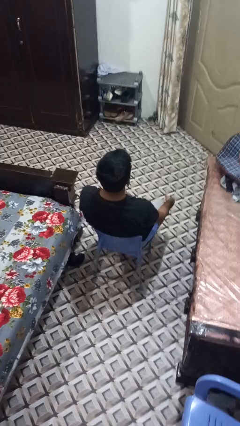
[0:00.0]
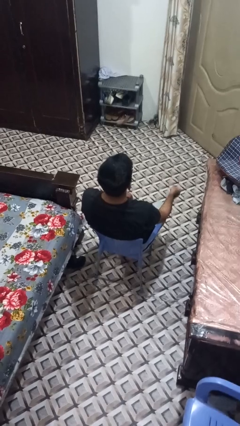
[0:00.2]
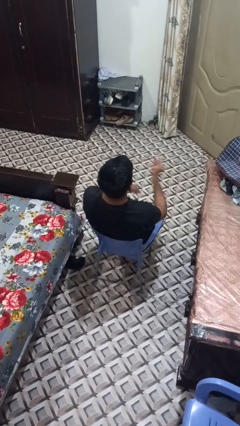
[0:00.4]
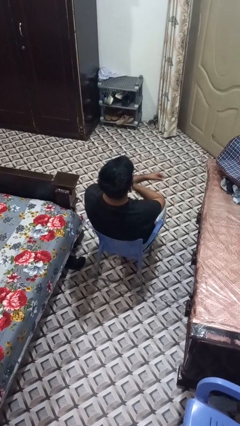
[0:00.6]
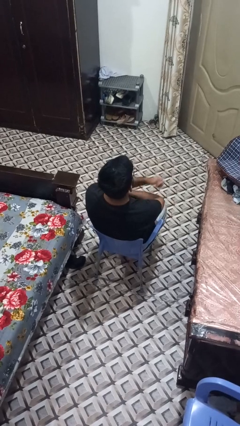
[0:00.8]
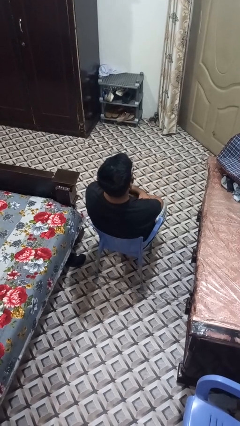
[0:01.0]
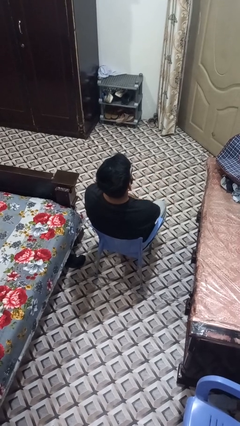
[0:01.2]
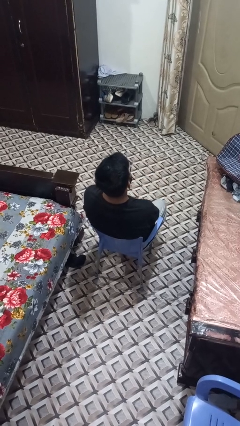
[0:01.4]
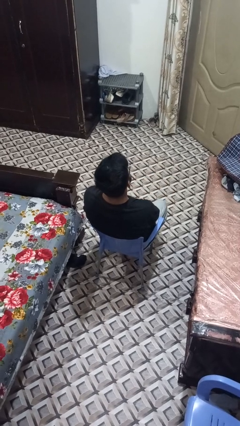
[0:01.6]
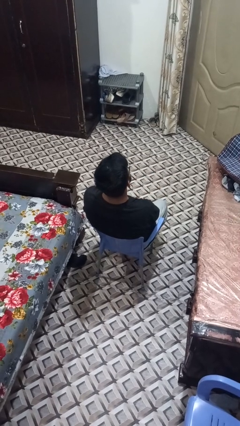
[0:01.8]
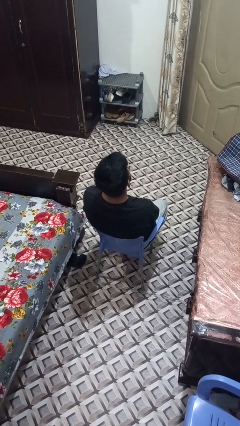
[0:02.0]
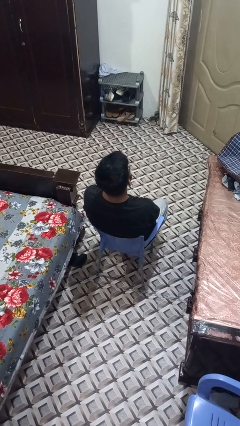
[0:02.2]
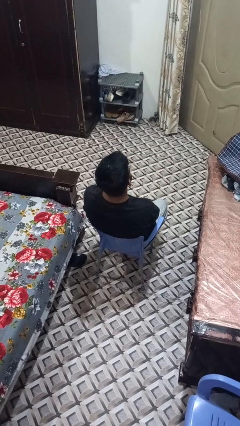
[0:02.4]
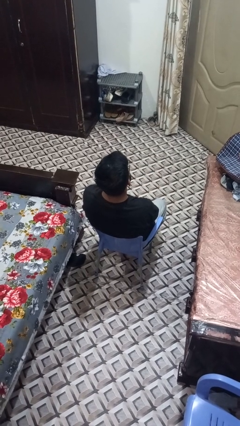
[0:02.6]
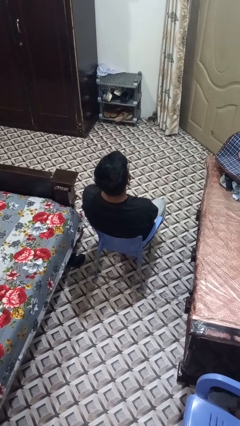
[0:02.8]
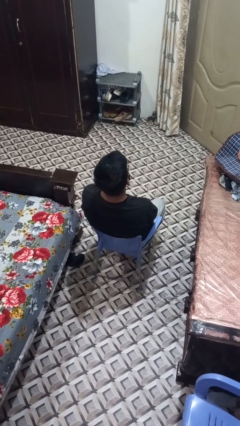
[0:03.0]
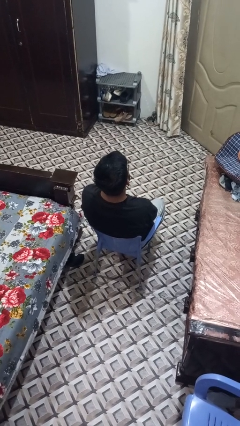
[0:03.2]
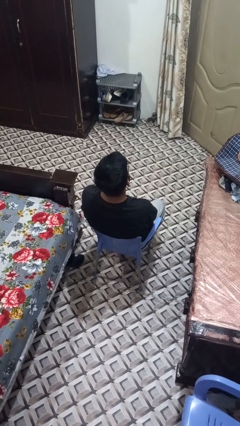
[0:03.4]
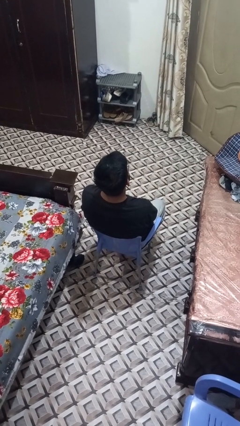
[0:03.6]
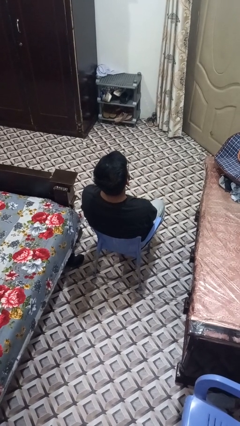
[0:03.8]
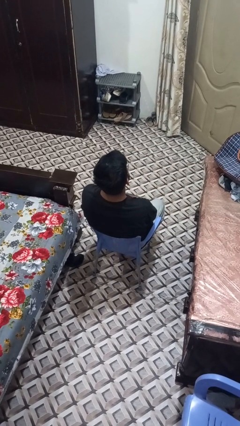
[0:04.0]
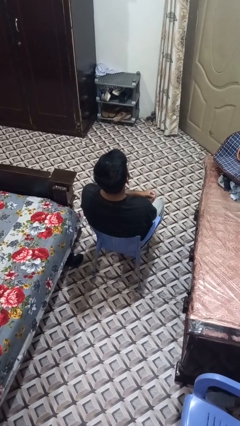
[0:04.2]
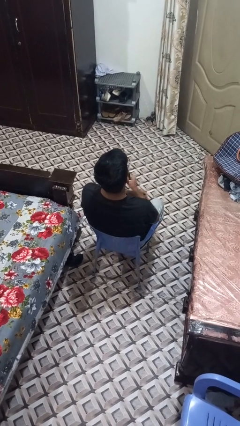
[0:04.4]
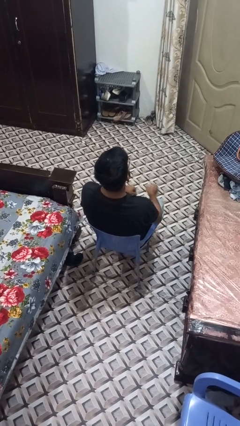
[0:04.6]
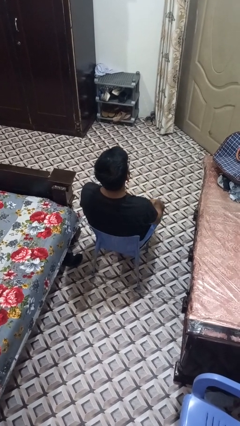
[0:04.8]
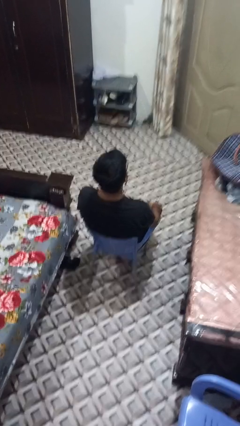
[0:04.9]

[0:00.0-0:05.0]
person crosses arms

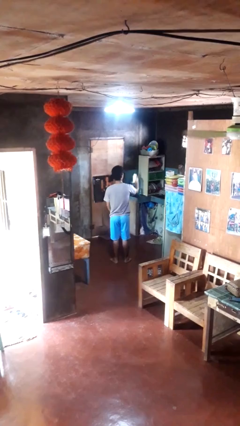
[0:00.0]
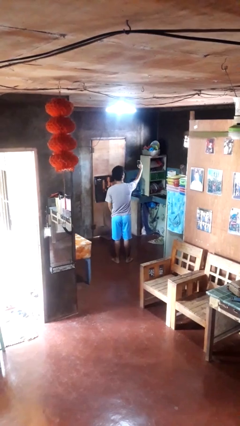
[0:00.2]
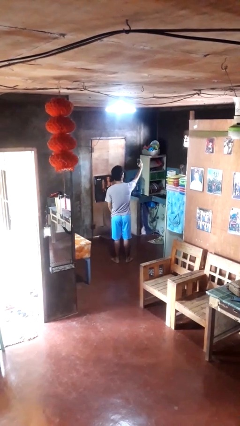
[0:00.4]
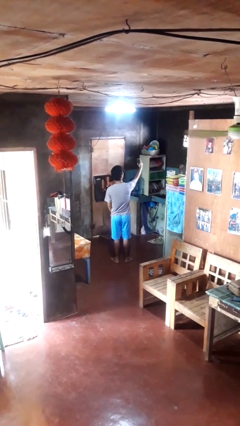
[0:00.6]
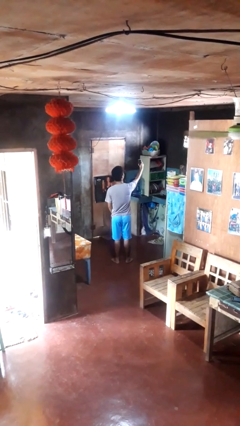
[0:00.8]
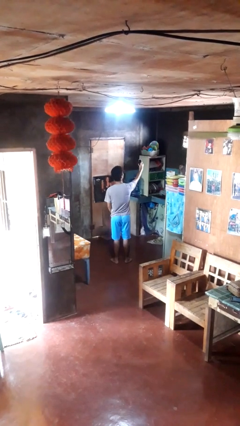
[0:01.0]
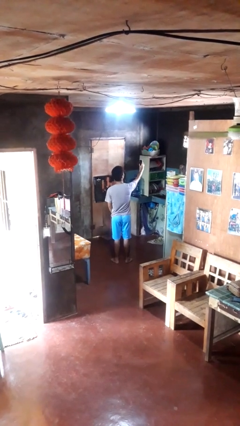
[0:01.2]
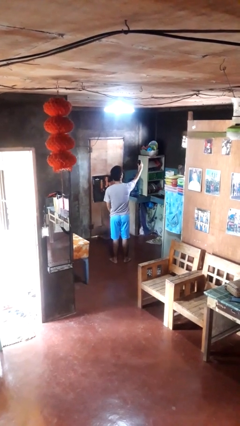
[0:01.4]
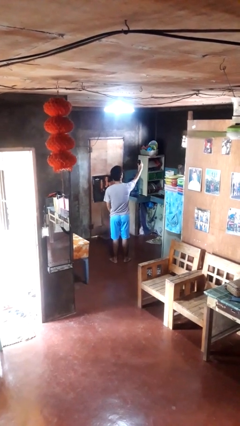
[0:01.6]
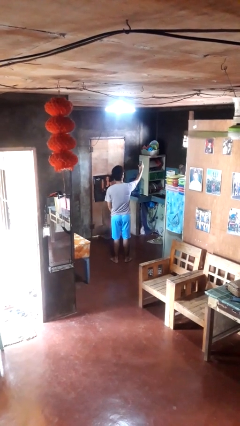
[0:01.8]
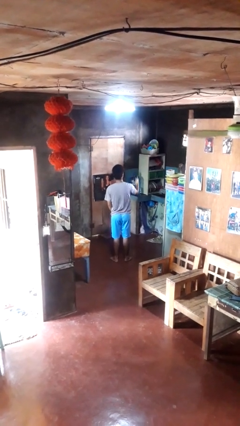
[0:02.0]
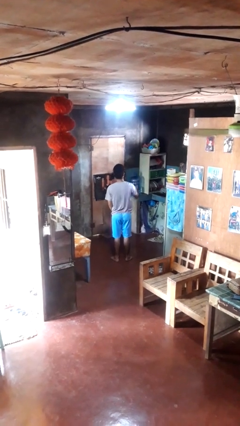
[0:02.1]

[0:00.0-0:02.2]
person takes selfie

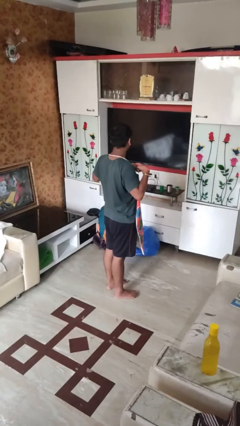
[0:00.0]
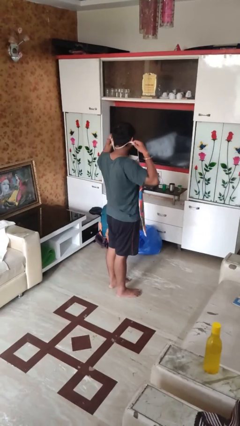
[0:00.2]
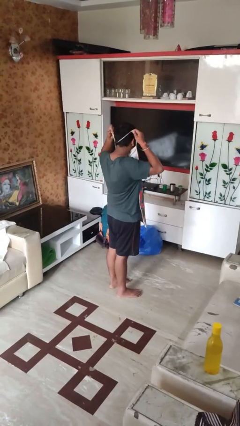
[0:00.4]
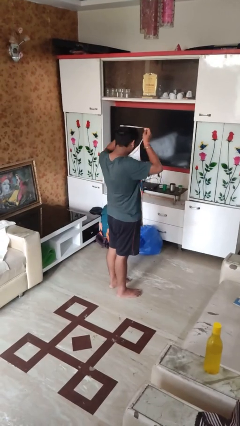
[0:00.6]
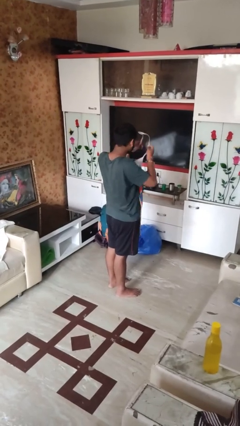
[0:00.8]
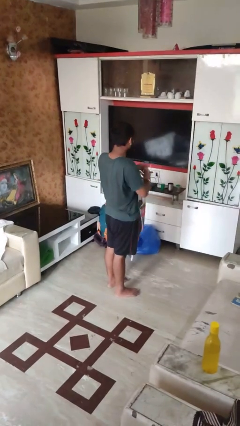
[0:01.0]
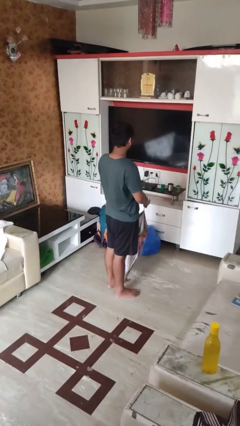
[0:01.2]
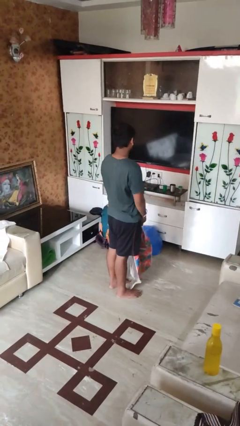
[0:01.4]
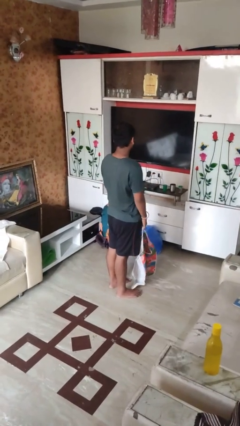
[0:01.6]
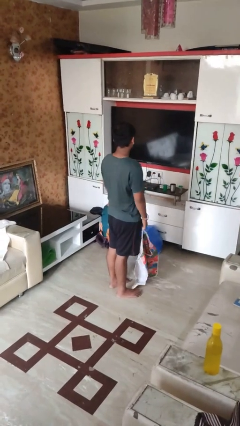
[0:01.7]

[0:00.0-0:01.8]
person takes off apron

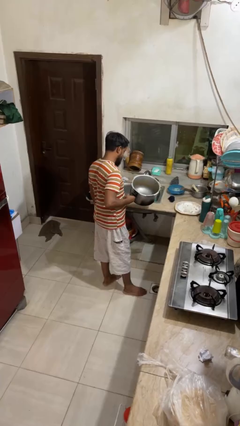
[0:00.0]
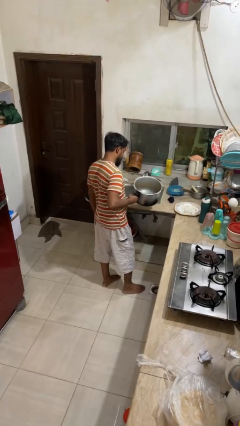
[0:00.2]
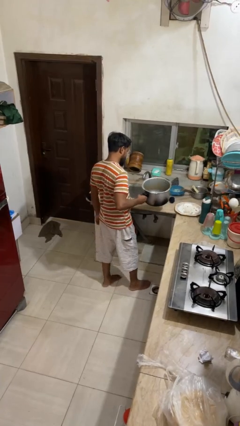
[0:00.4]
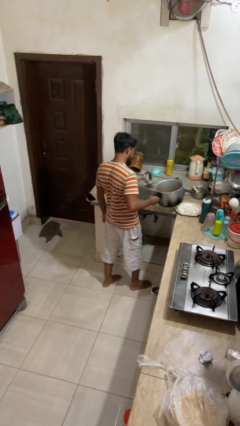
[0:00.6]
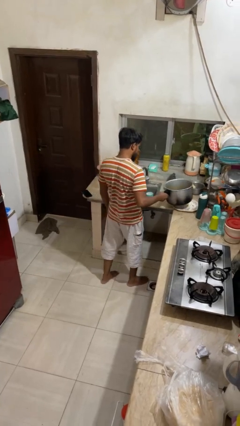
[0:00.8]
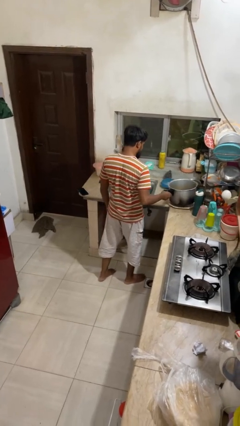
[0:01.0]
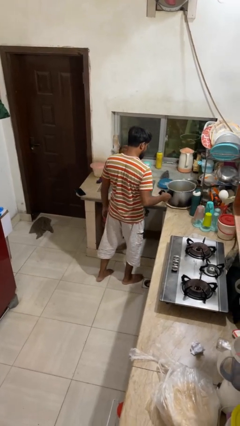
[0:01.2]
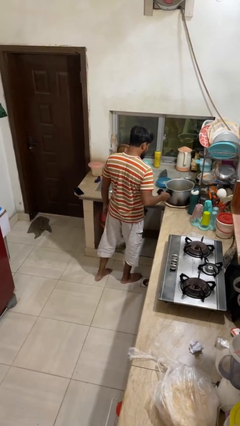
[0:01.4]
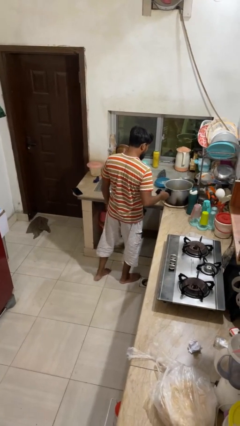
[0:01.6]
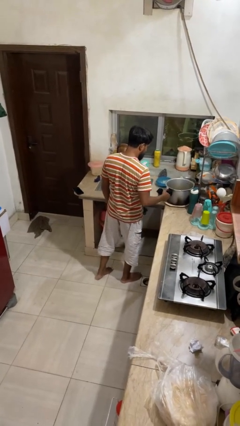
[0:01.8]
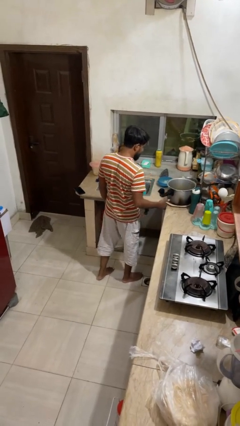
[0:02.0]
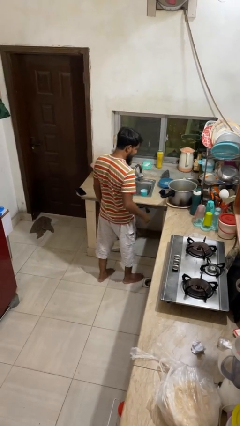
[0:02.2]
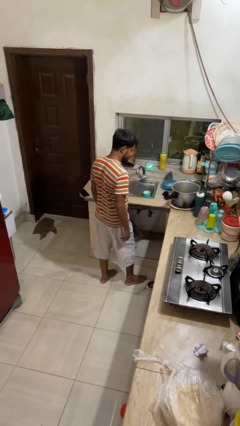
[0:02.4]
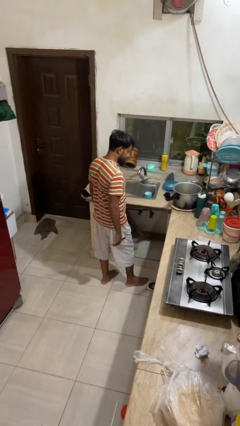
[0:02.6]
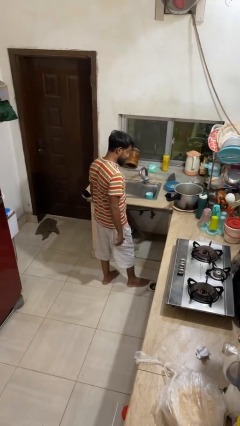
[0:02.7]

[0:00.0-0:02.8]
person puts down object on countertop

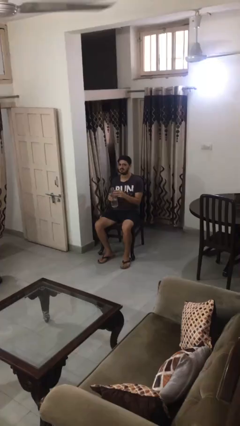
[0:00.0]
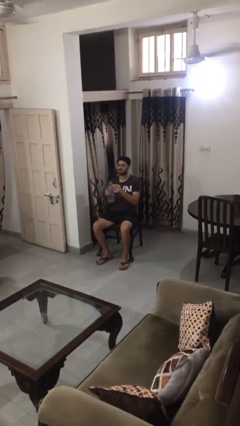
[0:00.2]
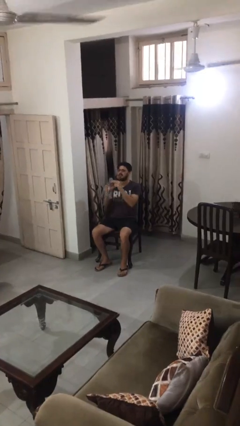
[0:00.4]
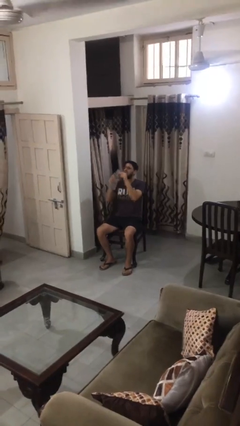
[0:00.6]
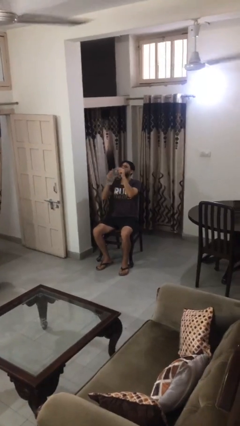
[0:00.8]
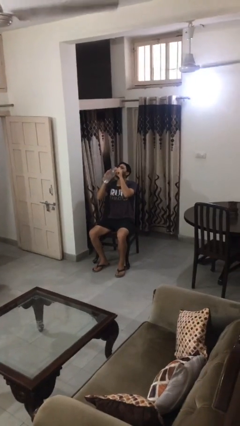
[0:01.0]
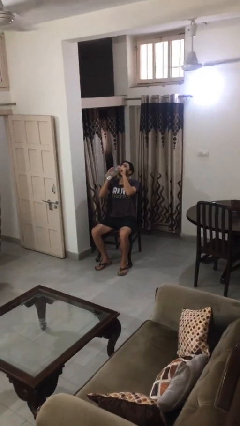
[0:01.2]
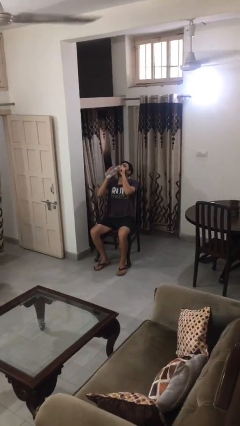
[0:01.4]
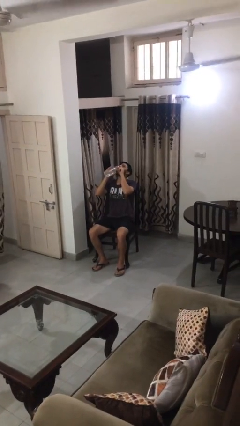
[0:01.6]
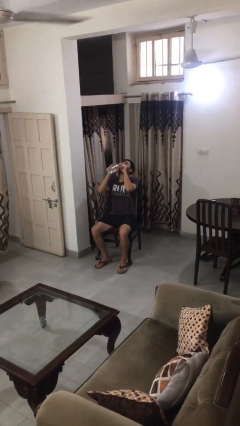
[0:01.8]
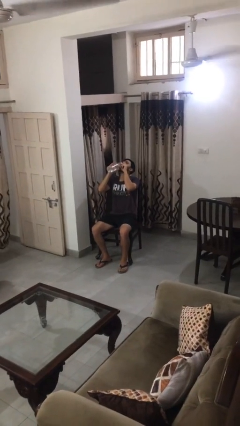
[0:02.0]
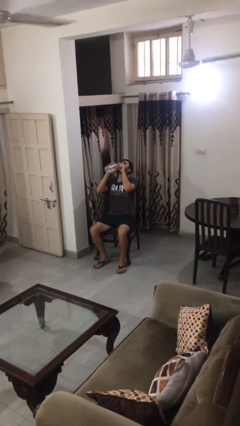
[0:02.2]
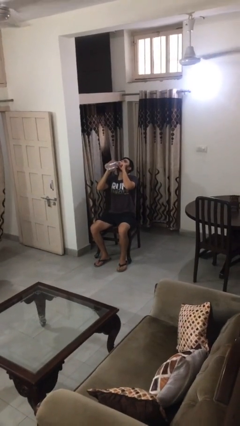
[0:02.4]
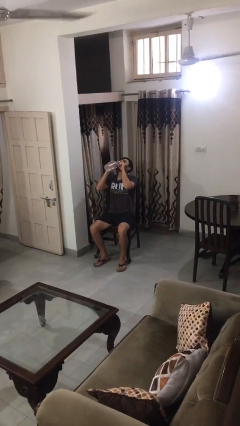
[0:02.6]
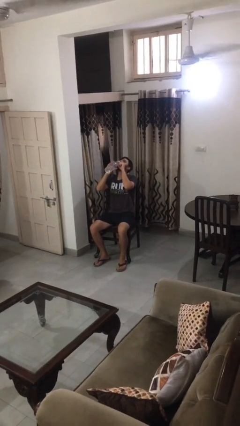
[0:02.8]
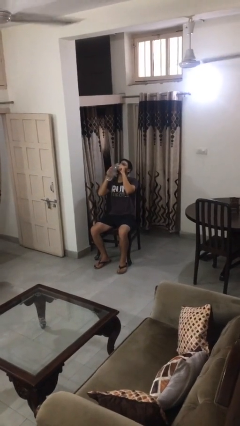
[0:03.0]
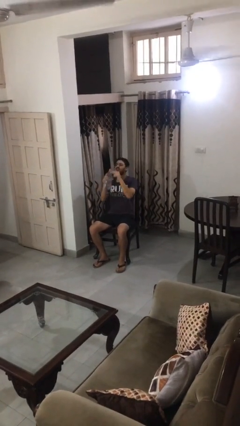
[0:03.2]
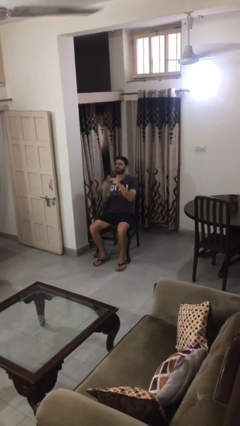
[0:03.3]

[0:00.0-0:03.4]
person drinks from bottle

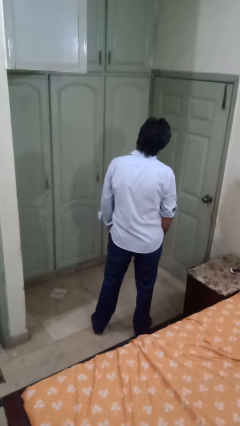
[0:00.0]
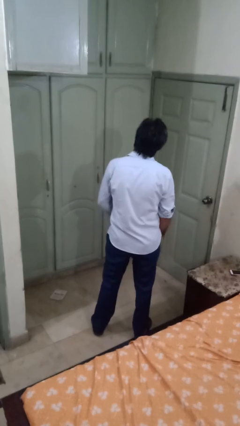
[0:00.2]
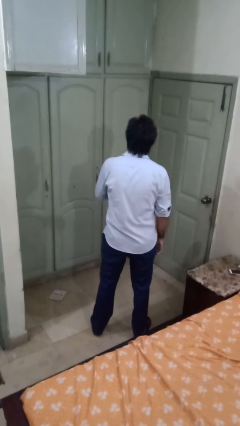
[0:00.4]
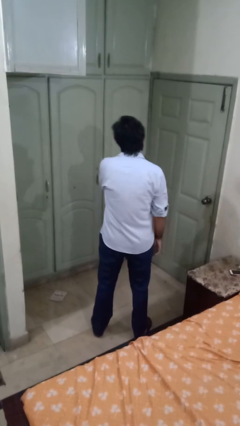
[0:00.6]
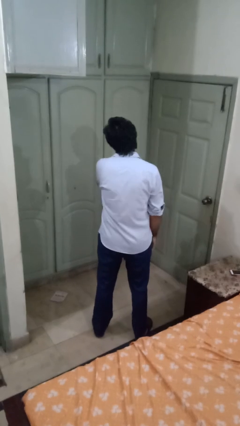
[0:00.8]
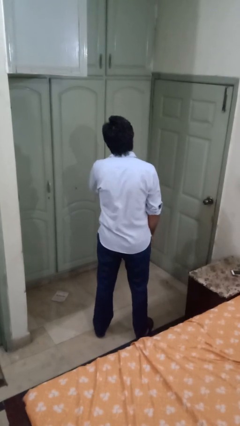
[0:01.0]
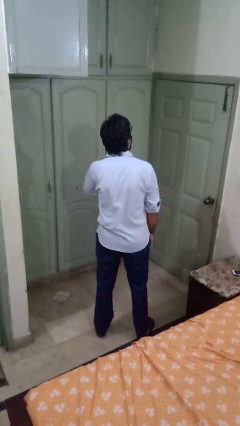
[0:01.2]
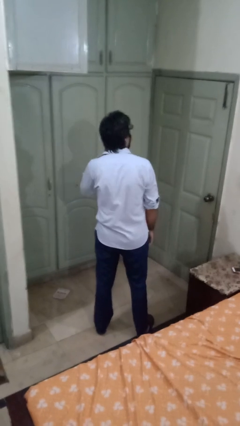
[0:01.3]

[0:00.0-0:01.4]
person gestures cut

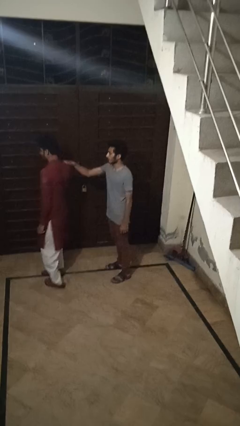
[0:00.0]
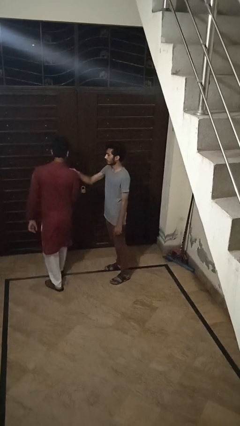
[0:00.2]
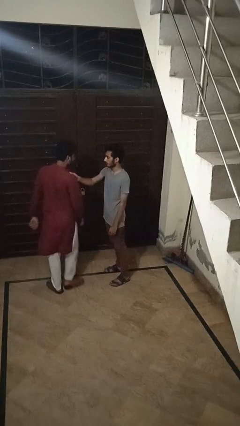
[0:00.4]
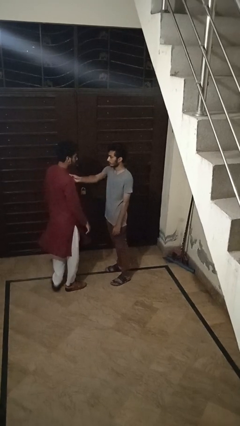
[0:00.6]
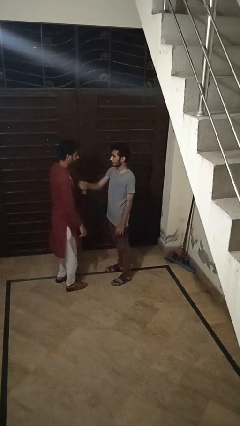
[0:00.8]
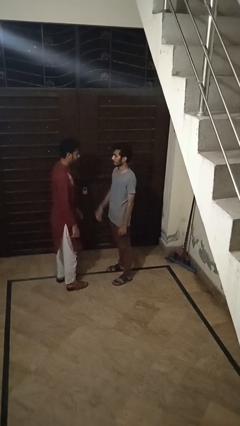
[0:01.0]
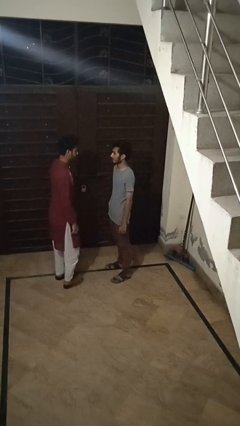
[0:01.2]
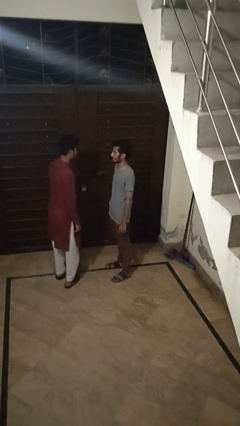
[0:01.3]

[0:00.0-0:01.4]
person spins person around
